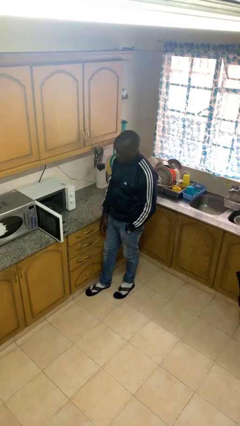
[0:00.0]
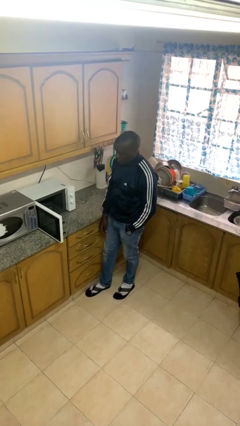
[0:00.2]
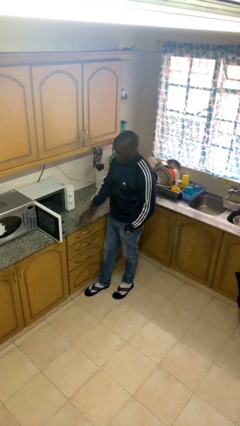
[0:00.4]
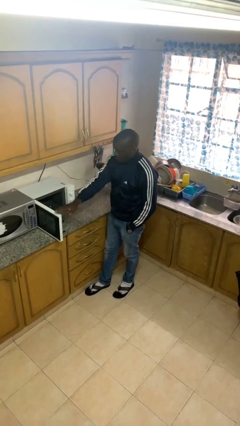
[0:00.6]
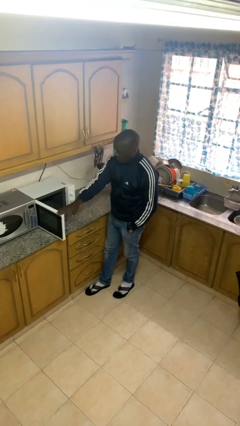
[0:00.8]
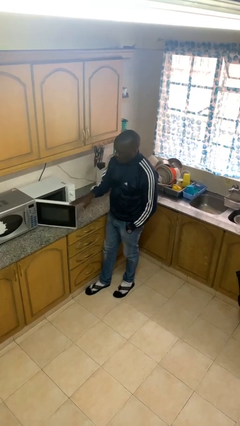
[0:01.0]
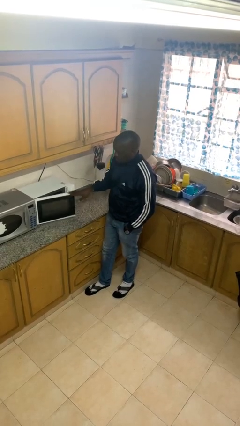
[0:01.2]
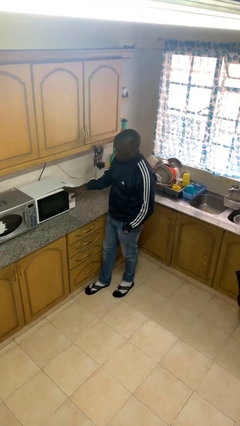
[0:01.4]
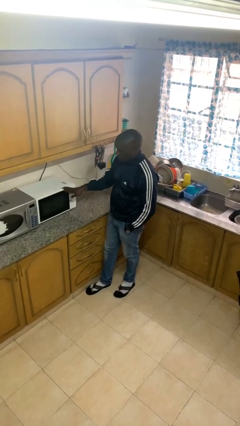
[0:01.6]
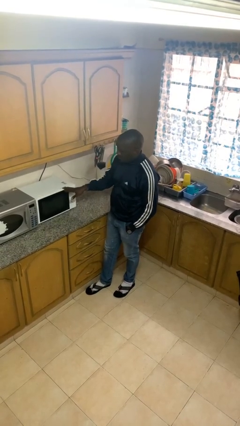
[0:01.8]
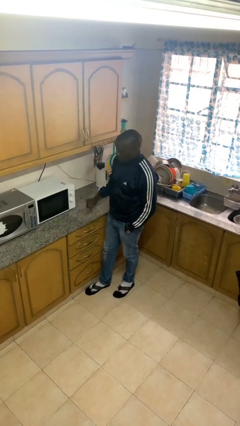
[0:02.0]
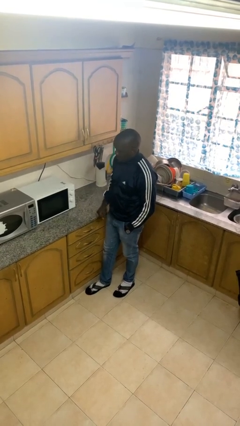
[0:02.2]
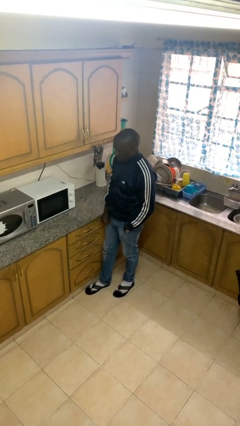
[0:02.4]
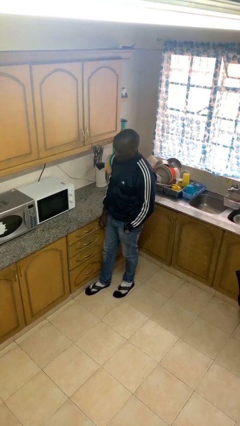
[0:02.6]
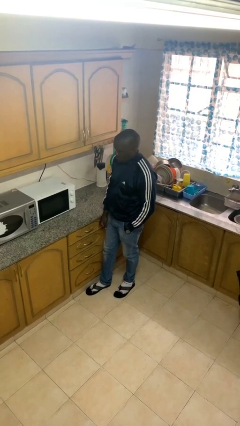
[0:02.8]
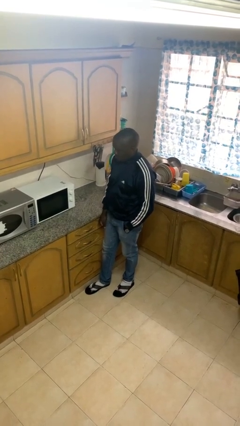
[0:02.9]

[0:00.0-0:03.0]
person closes microwave

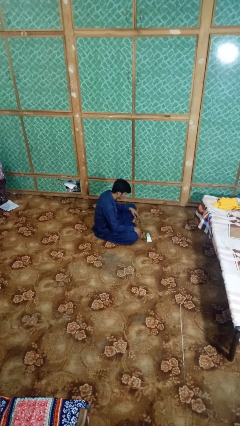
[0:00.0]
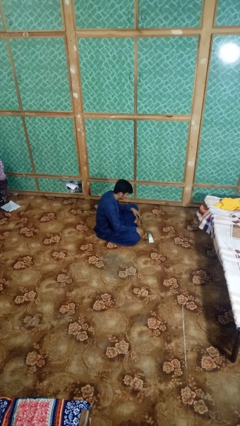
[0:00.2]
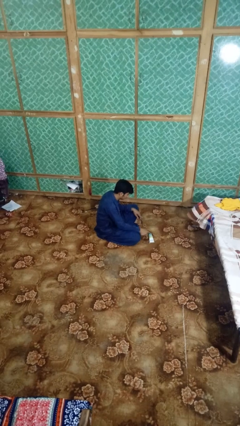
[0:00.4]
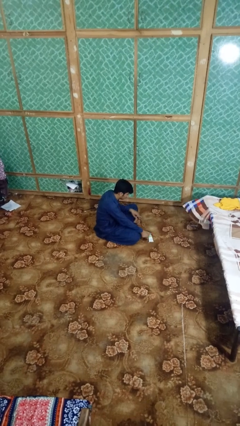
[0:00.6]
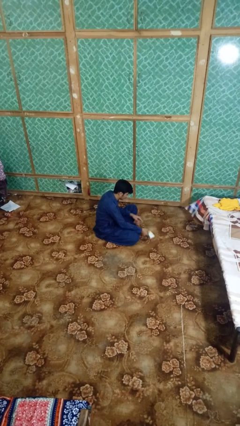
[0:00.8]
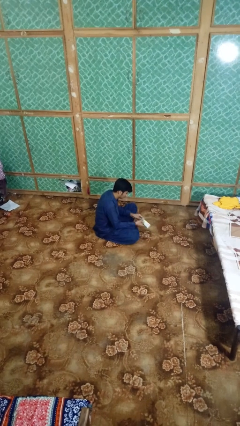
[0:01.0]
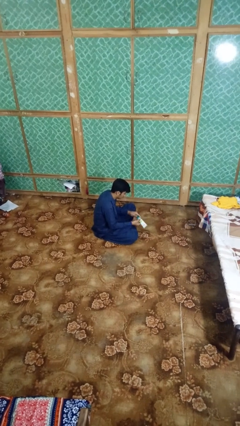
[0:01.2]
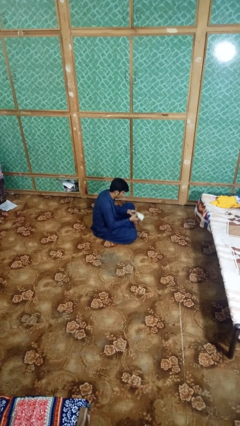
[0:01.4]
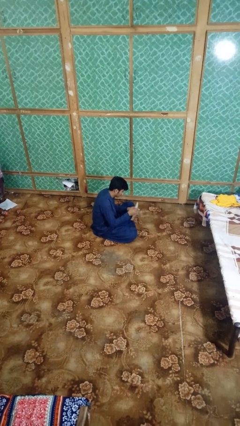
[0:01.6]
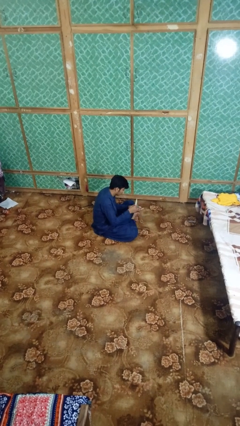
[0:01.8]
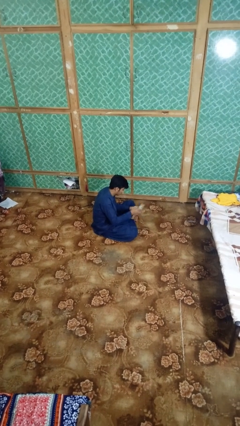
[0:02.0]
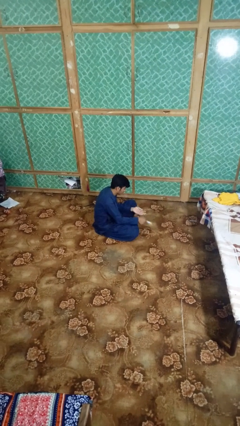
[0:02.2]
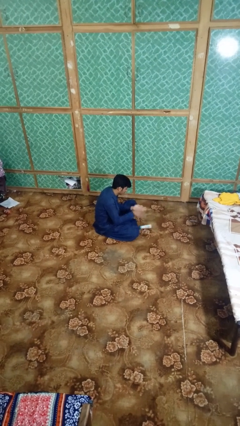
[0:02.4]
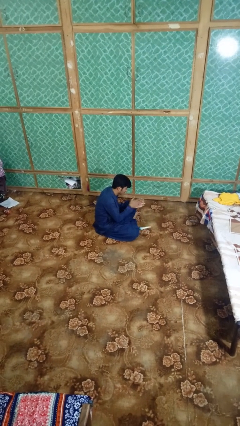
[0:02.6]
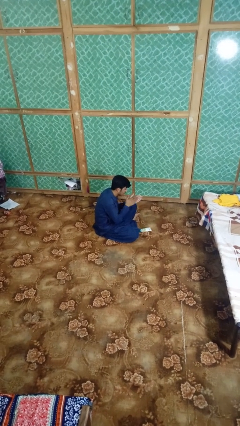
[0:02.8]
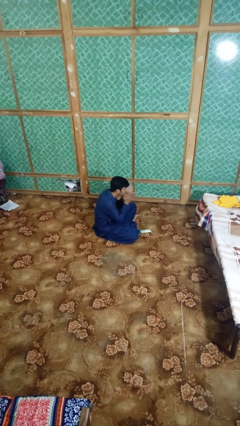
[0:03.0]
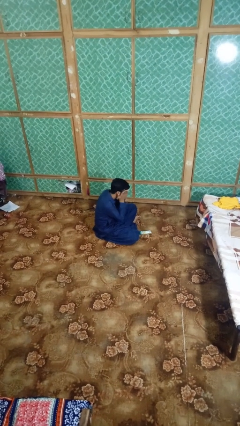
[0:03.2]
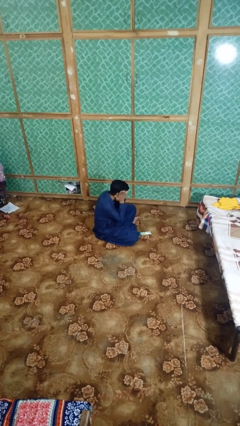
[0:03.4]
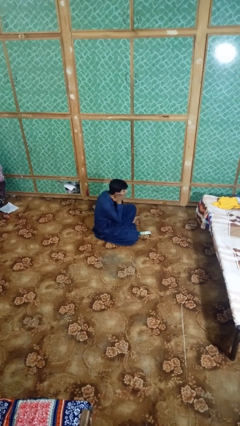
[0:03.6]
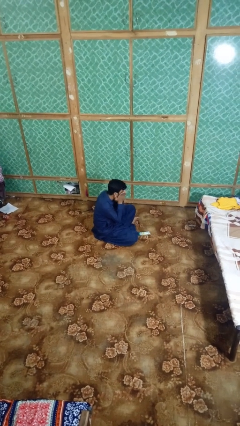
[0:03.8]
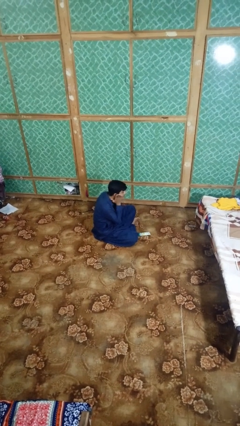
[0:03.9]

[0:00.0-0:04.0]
person applies facial moisturizer

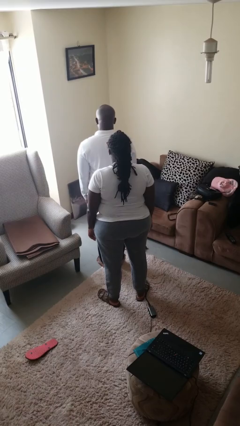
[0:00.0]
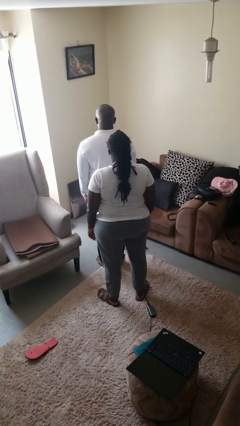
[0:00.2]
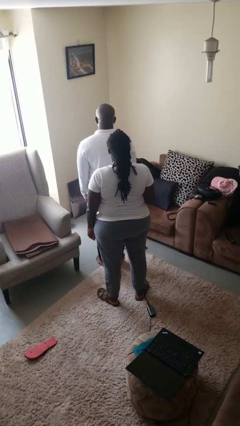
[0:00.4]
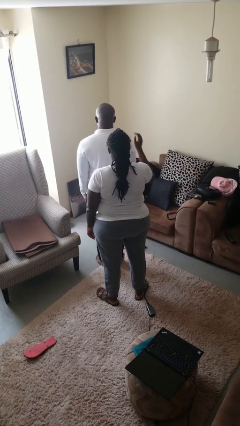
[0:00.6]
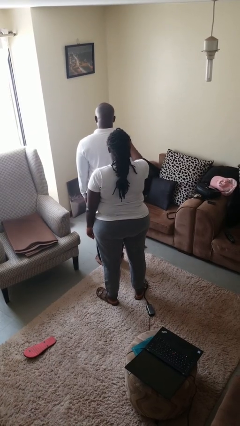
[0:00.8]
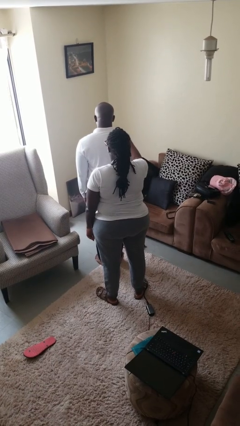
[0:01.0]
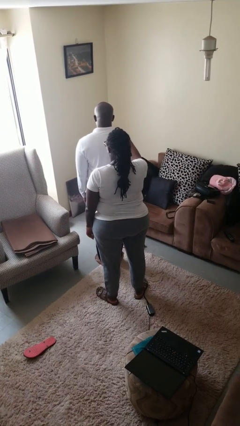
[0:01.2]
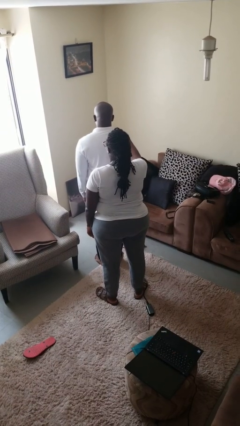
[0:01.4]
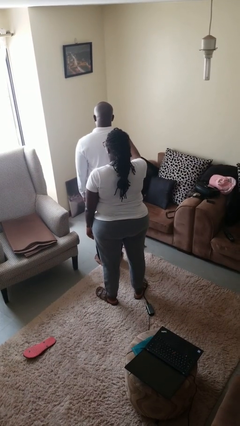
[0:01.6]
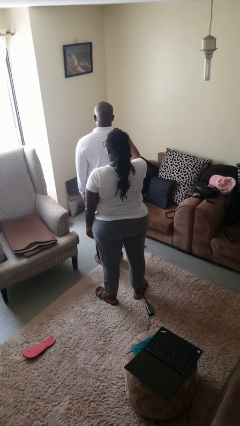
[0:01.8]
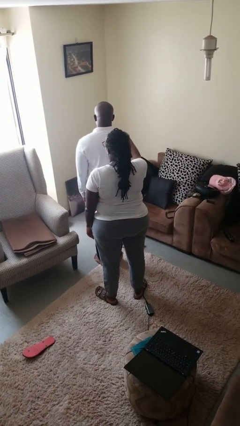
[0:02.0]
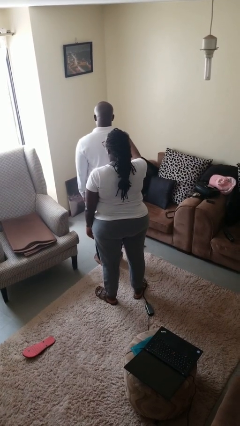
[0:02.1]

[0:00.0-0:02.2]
person grabs person by shoulder

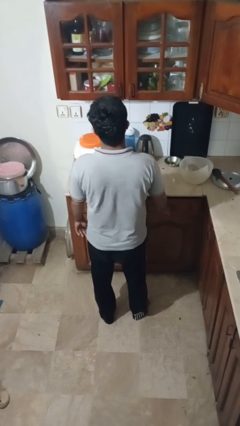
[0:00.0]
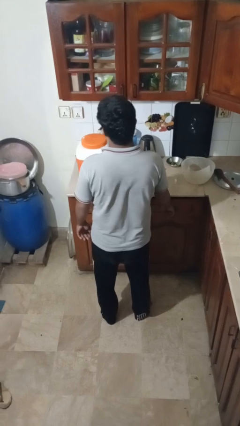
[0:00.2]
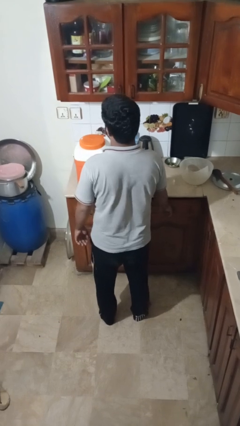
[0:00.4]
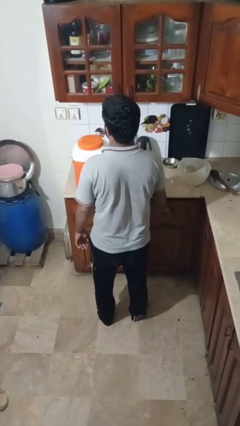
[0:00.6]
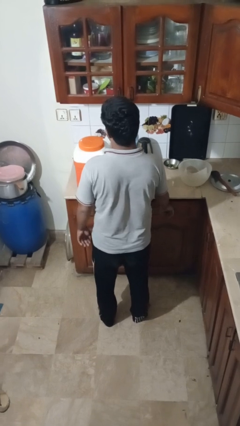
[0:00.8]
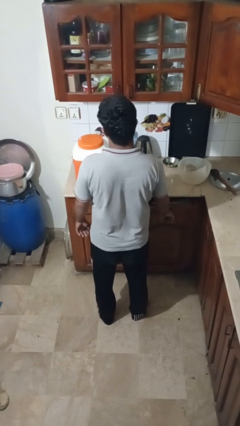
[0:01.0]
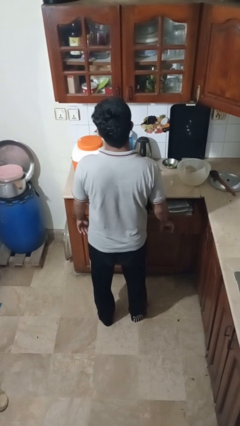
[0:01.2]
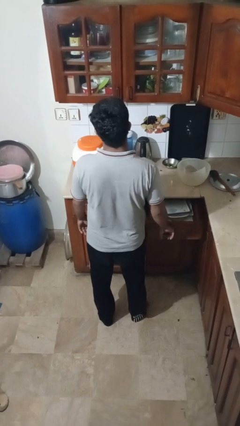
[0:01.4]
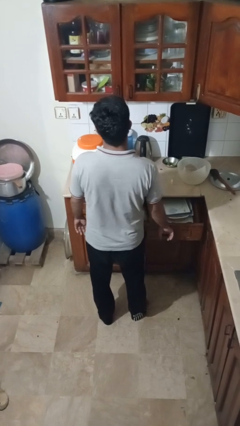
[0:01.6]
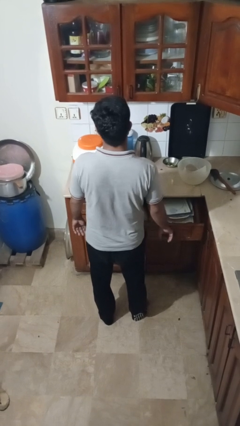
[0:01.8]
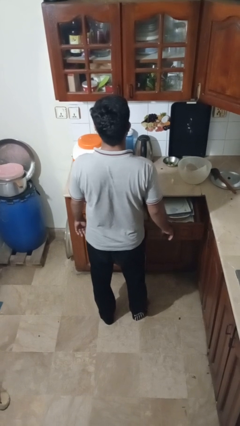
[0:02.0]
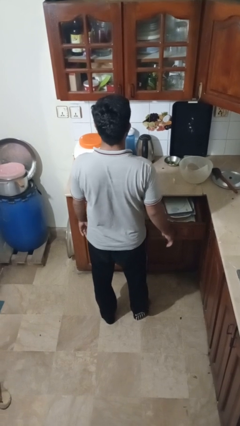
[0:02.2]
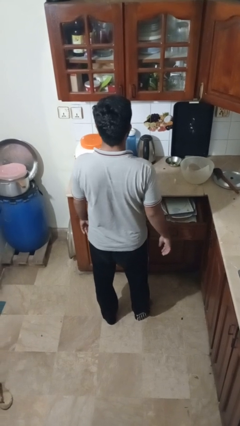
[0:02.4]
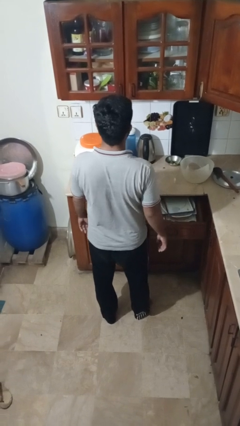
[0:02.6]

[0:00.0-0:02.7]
person opens kitchen drawer

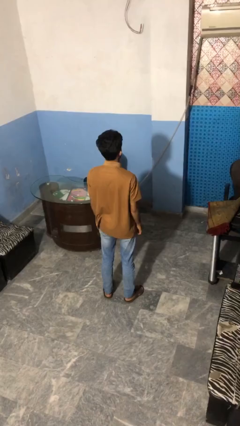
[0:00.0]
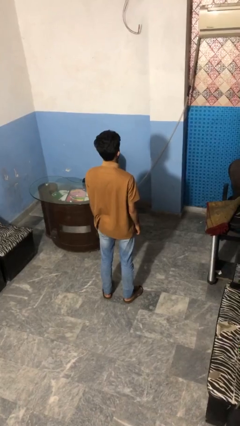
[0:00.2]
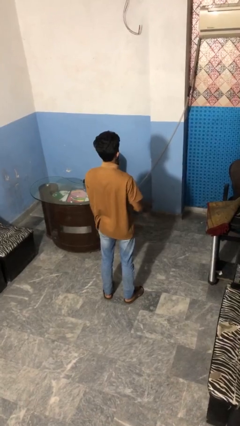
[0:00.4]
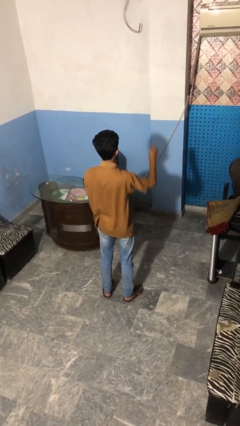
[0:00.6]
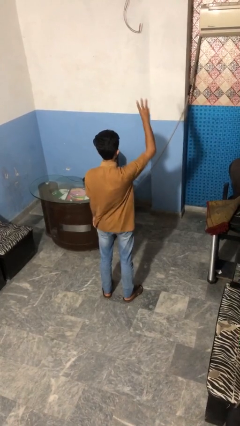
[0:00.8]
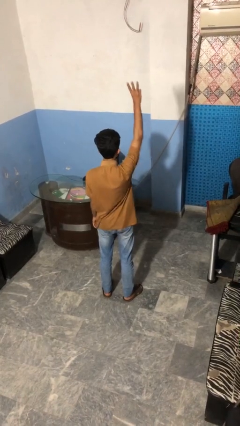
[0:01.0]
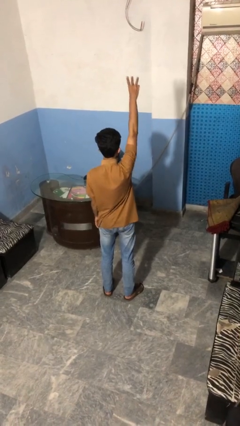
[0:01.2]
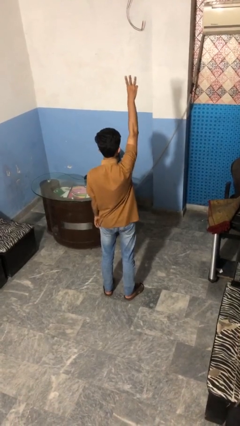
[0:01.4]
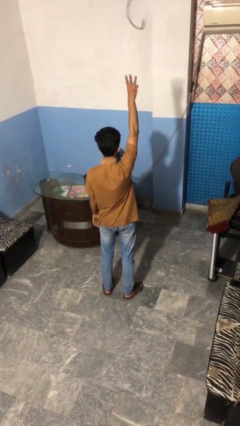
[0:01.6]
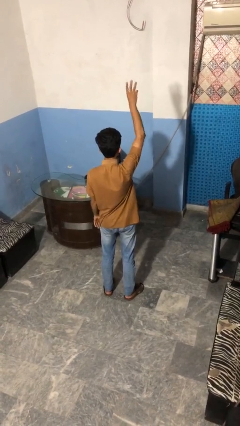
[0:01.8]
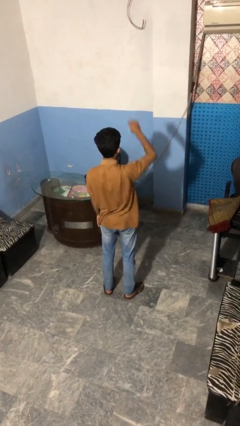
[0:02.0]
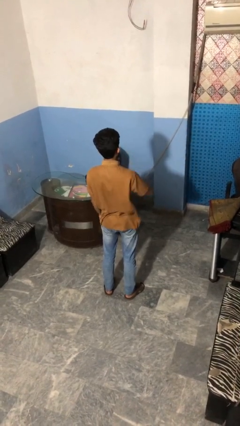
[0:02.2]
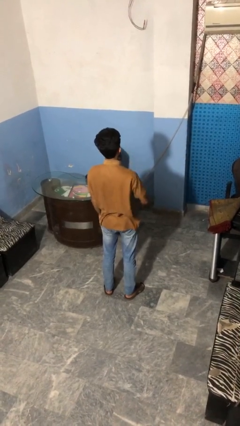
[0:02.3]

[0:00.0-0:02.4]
person gestures number three

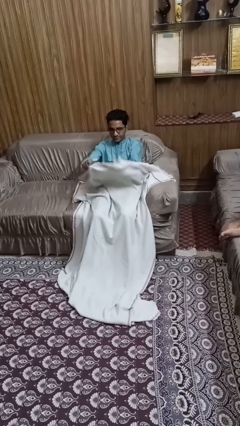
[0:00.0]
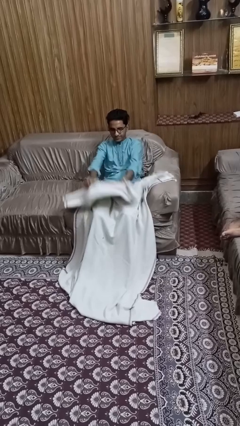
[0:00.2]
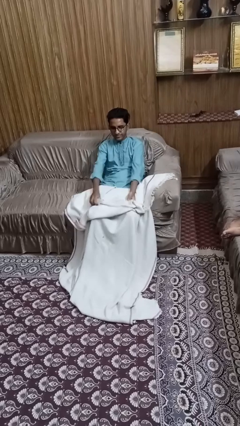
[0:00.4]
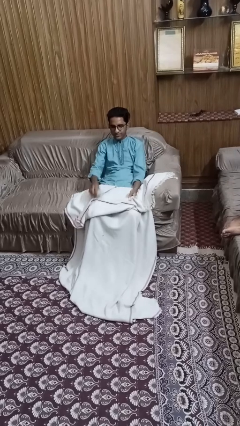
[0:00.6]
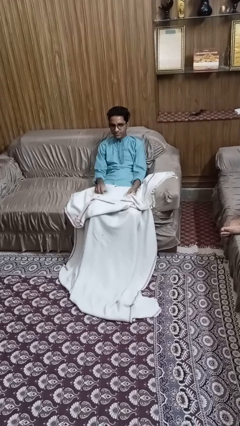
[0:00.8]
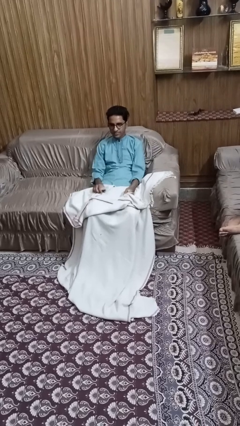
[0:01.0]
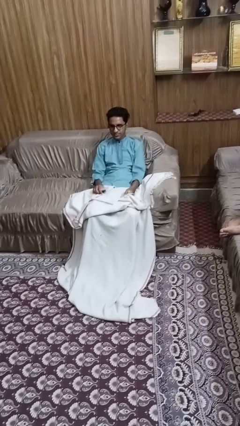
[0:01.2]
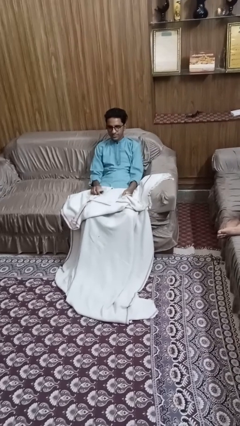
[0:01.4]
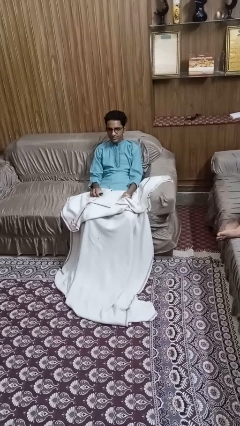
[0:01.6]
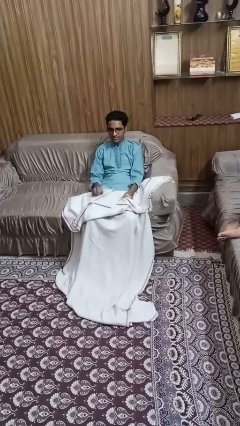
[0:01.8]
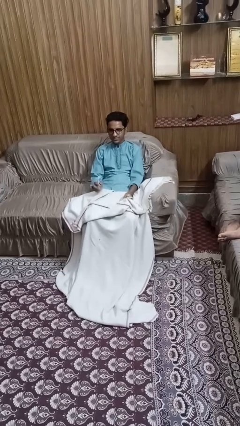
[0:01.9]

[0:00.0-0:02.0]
person uncovers with blanket

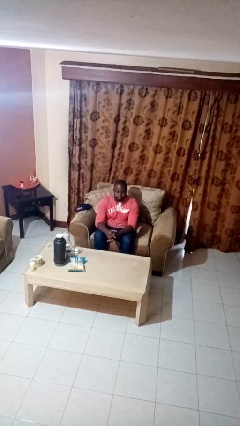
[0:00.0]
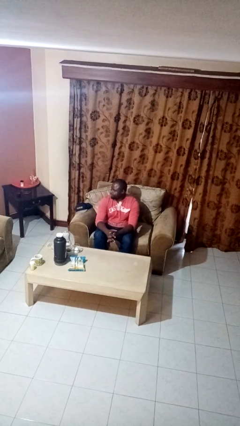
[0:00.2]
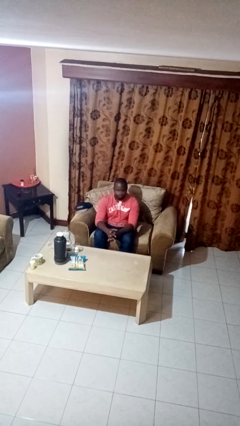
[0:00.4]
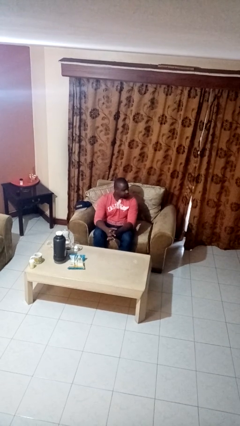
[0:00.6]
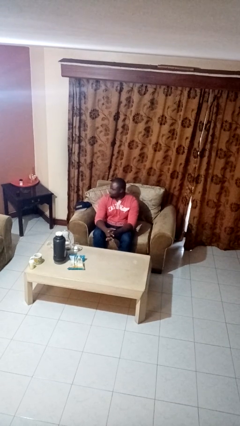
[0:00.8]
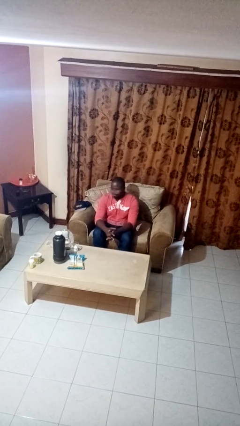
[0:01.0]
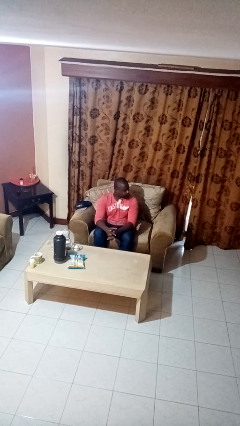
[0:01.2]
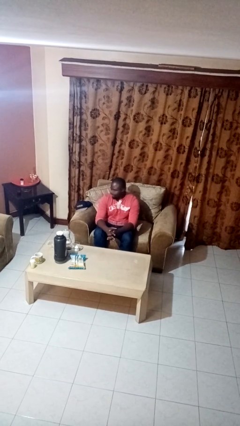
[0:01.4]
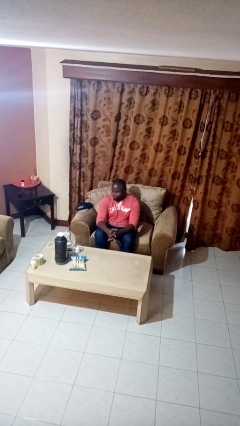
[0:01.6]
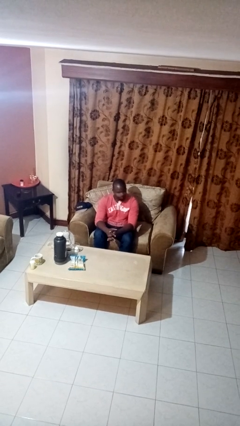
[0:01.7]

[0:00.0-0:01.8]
person shakes head
